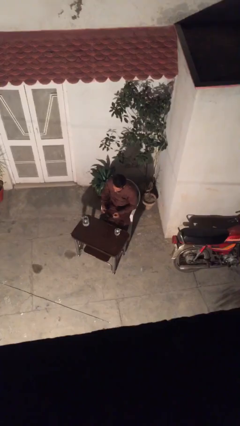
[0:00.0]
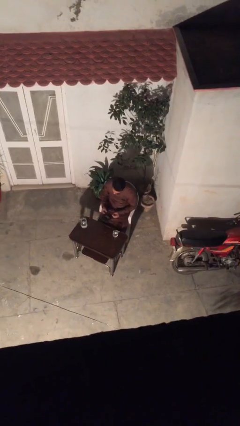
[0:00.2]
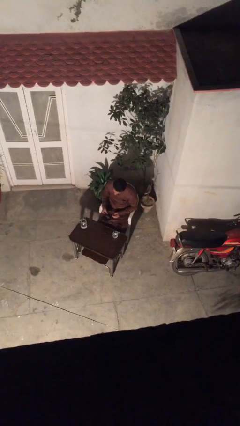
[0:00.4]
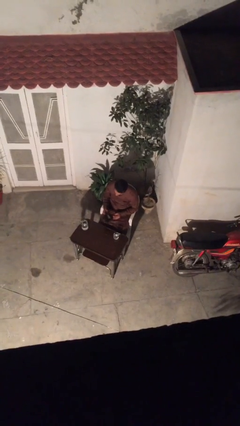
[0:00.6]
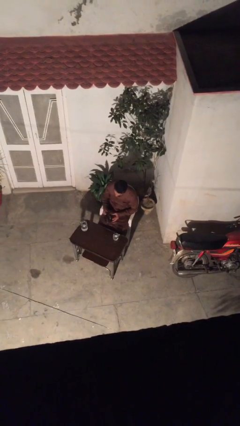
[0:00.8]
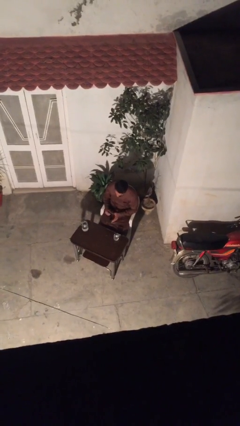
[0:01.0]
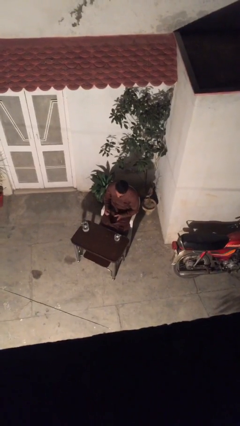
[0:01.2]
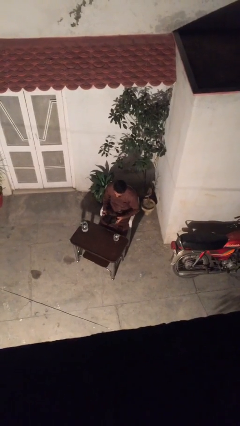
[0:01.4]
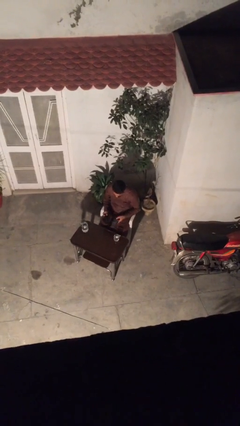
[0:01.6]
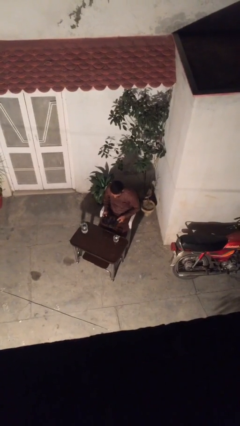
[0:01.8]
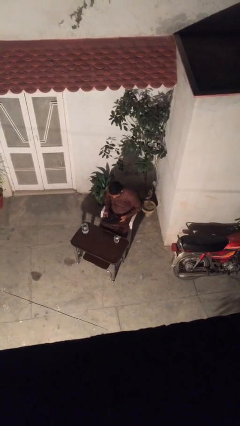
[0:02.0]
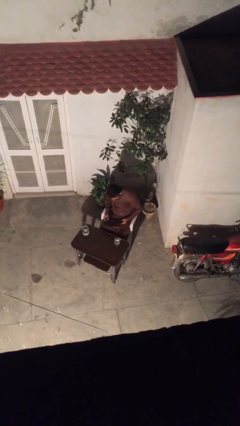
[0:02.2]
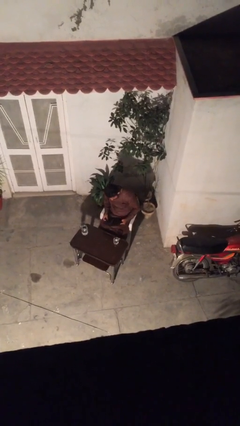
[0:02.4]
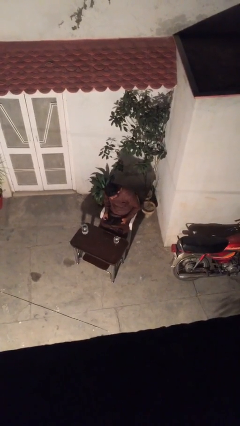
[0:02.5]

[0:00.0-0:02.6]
person picks up object from table

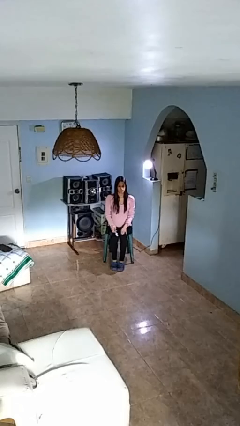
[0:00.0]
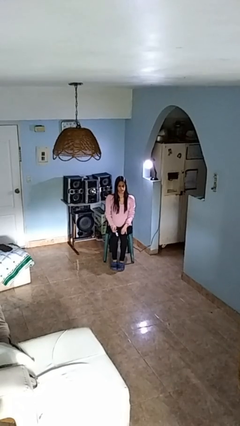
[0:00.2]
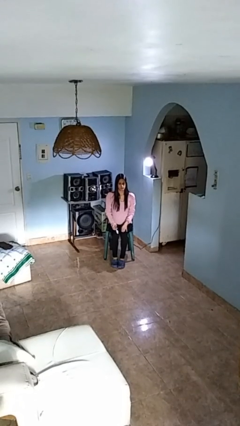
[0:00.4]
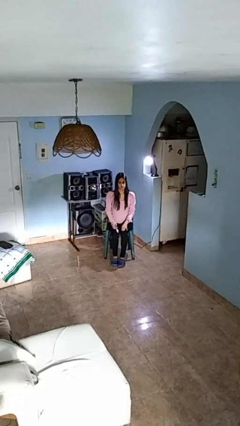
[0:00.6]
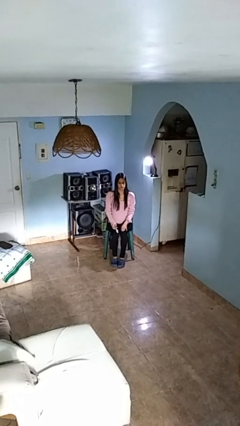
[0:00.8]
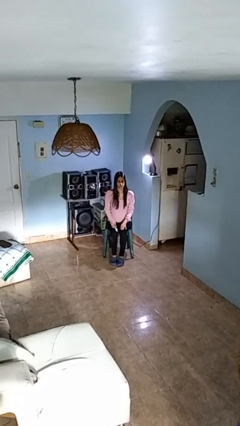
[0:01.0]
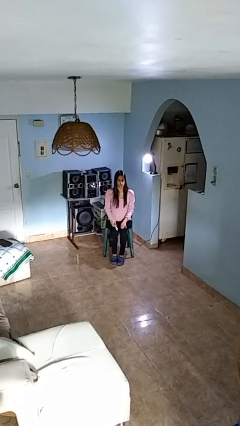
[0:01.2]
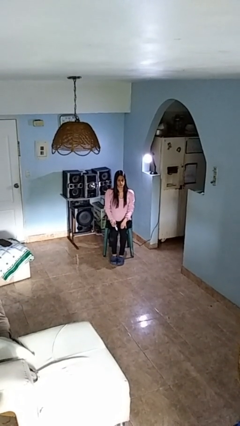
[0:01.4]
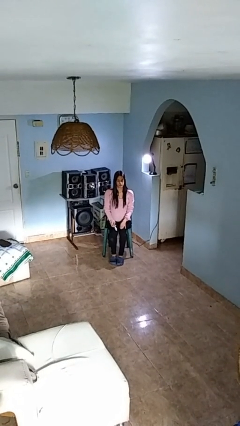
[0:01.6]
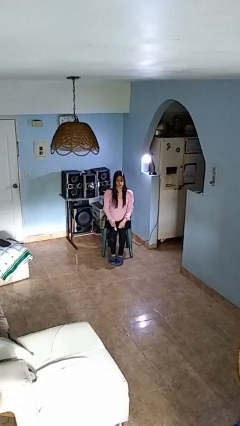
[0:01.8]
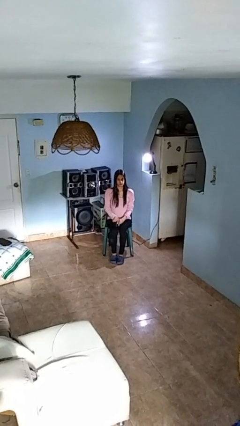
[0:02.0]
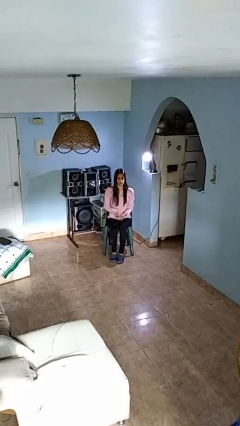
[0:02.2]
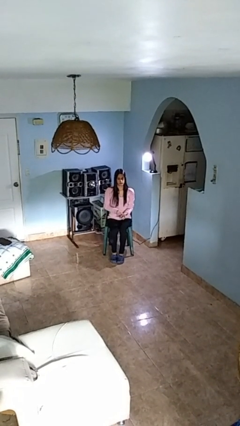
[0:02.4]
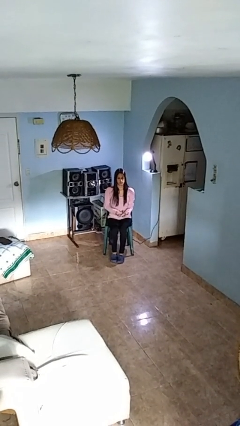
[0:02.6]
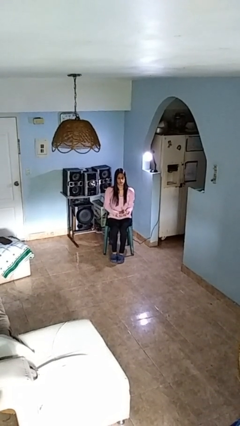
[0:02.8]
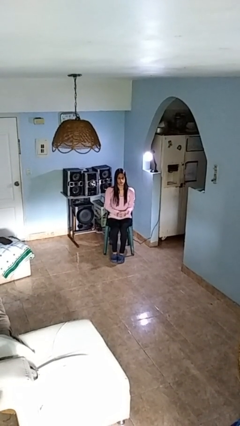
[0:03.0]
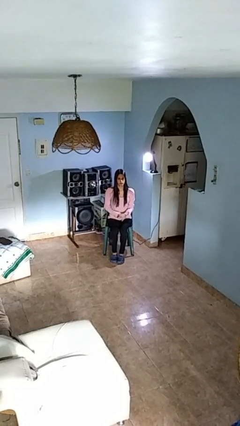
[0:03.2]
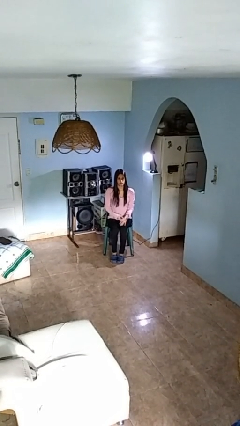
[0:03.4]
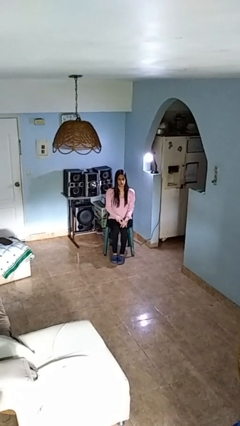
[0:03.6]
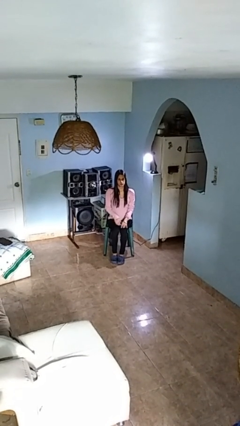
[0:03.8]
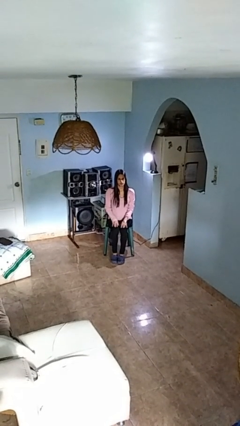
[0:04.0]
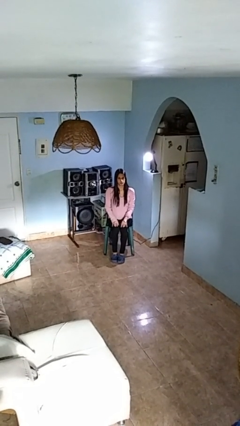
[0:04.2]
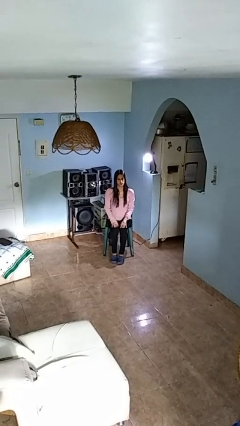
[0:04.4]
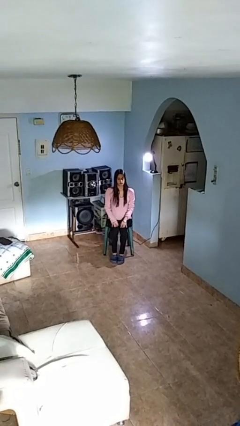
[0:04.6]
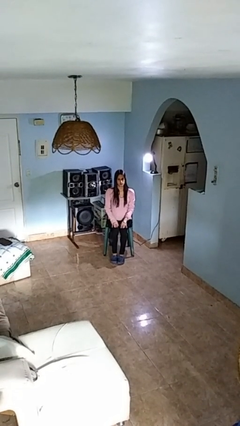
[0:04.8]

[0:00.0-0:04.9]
person puts on wristwatch

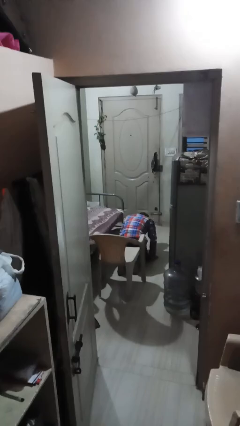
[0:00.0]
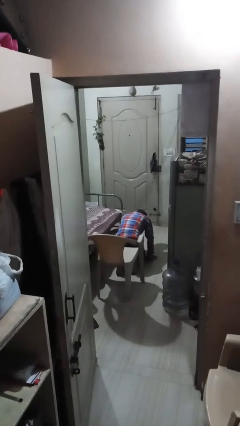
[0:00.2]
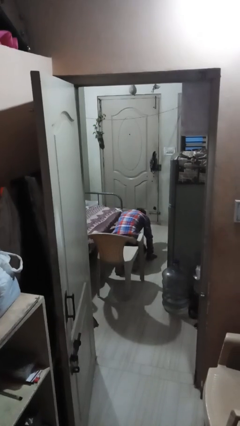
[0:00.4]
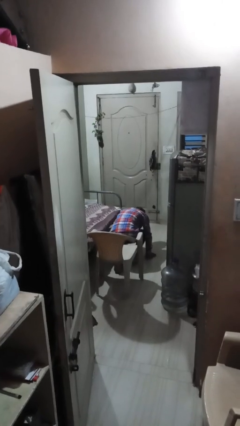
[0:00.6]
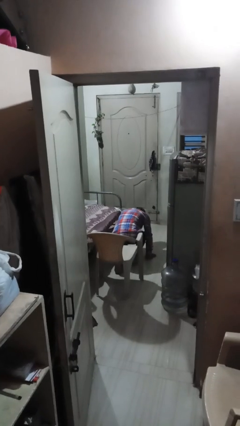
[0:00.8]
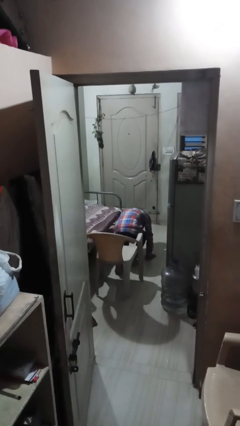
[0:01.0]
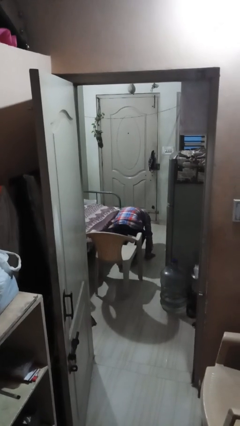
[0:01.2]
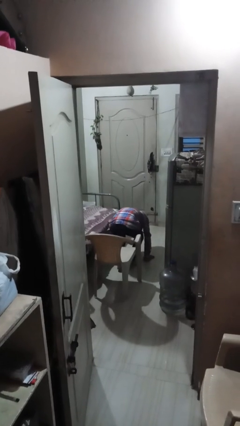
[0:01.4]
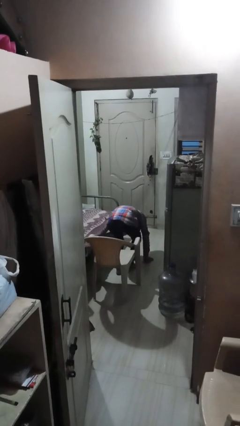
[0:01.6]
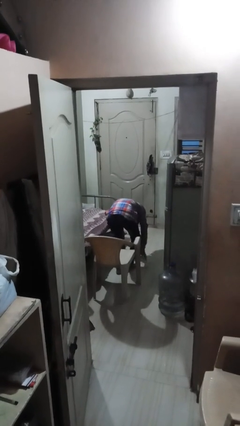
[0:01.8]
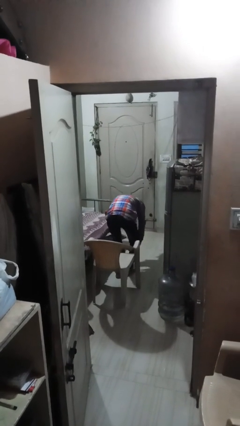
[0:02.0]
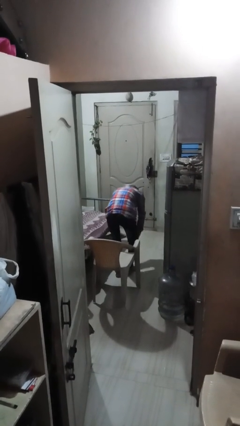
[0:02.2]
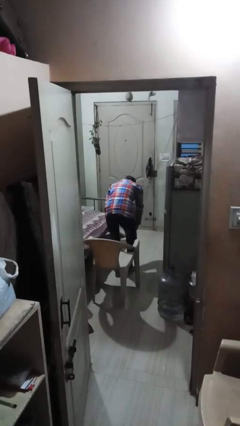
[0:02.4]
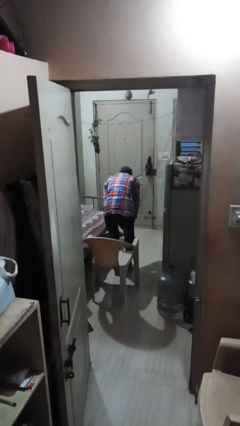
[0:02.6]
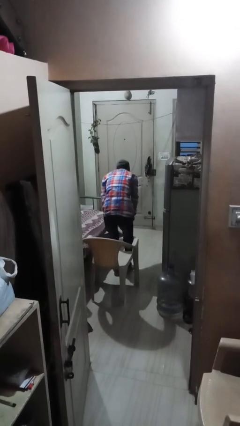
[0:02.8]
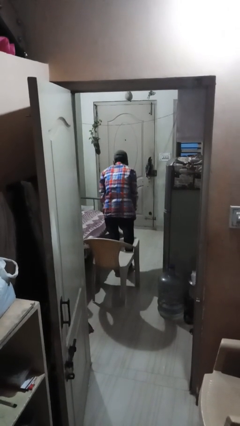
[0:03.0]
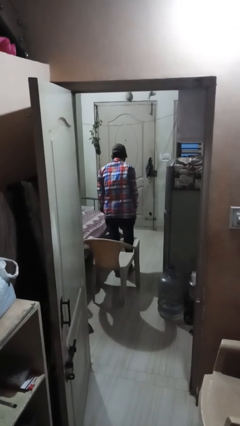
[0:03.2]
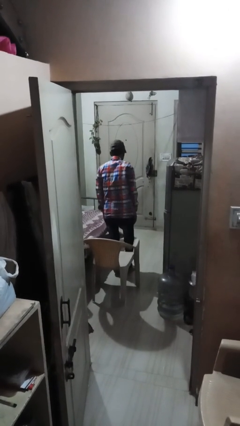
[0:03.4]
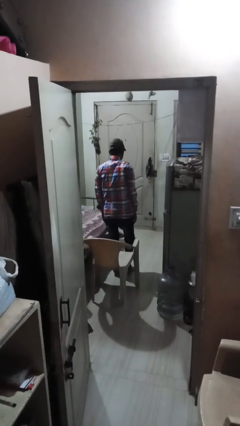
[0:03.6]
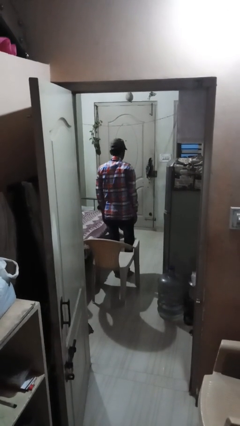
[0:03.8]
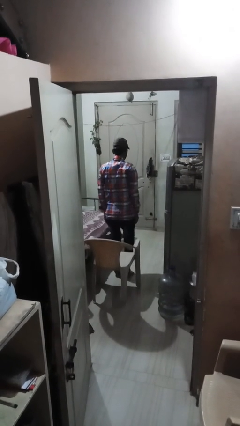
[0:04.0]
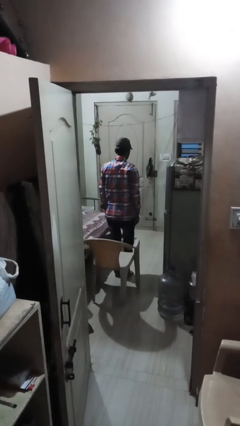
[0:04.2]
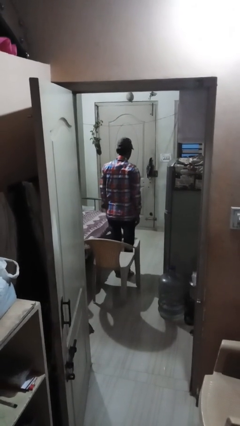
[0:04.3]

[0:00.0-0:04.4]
person stands up from floor

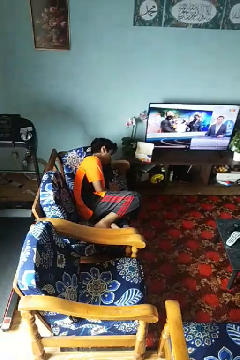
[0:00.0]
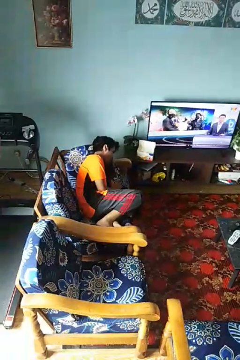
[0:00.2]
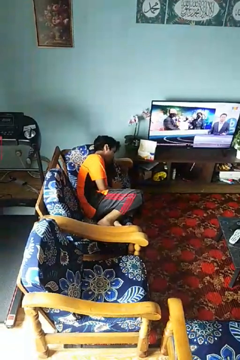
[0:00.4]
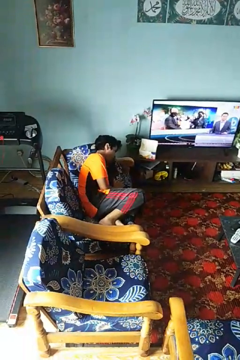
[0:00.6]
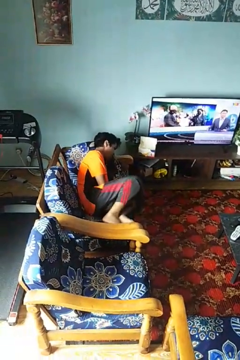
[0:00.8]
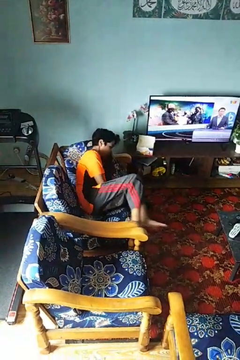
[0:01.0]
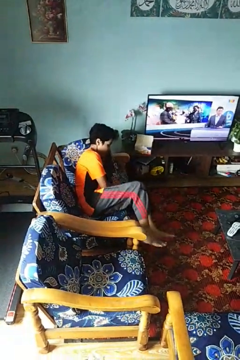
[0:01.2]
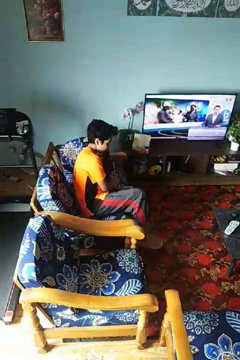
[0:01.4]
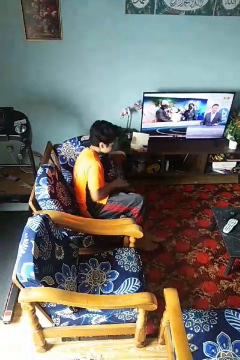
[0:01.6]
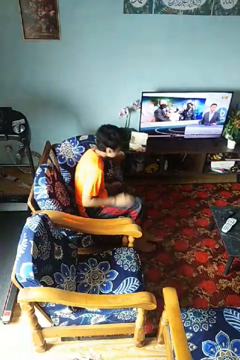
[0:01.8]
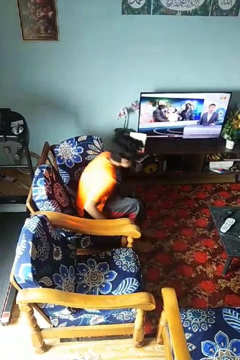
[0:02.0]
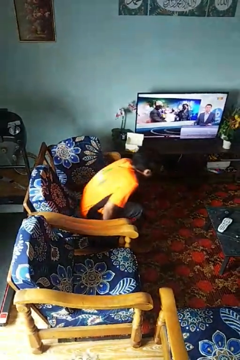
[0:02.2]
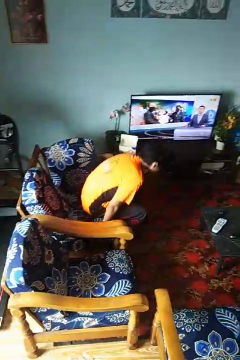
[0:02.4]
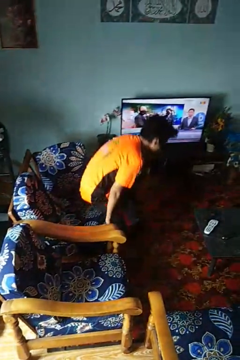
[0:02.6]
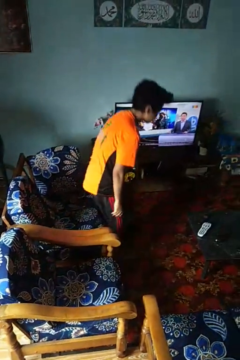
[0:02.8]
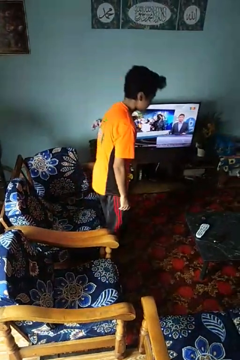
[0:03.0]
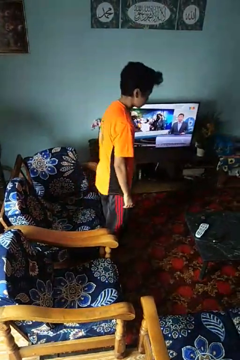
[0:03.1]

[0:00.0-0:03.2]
person stands up

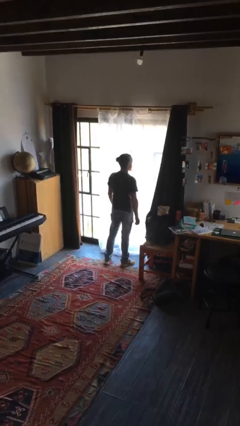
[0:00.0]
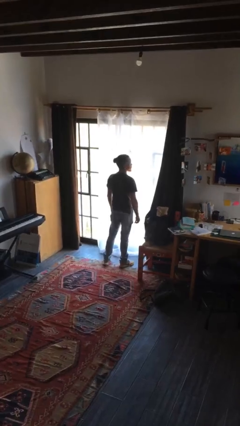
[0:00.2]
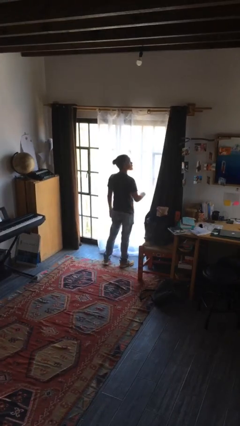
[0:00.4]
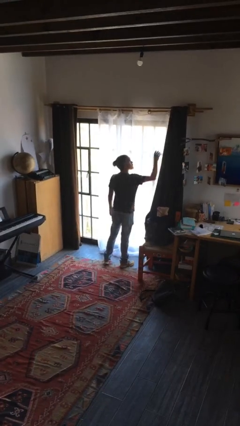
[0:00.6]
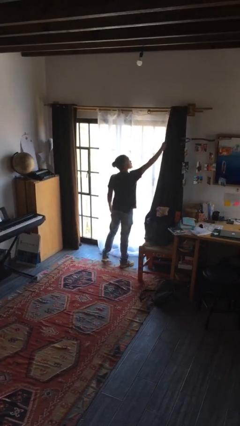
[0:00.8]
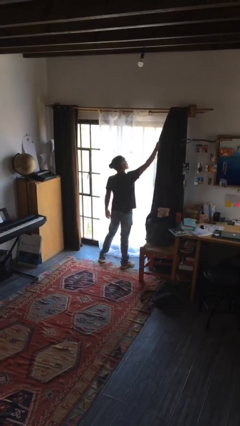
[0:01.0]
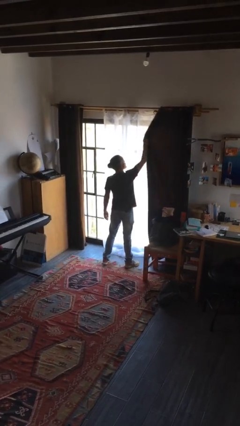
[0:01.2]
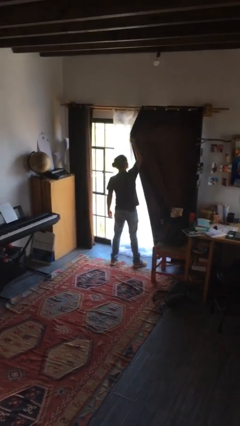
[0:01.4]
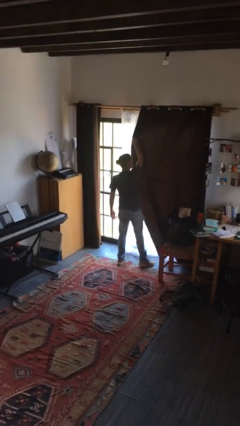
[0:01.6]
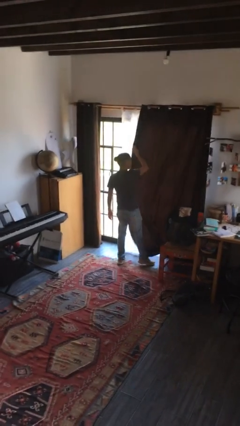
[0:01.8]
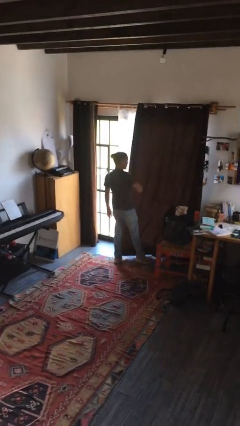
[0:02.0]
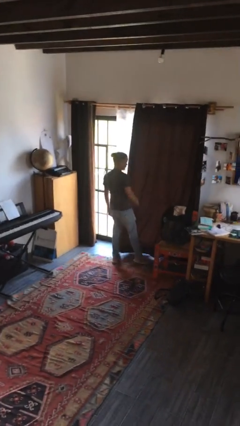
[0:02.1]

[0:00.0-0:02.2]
person closes curtains

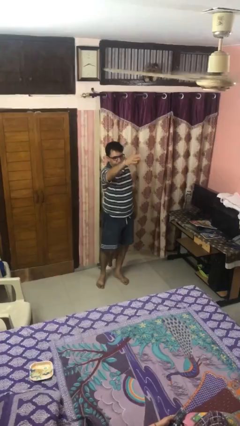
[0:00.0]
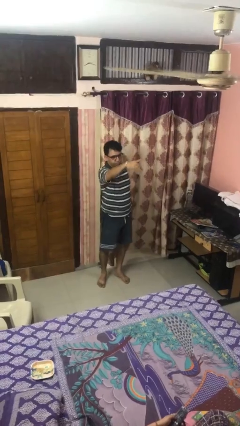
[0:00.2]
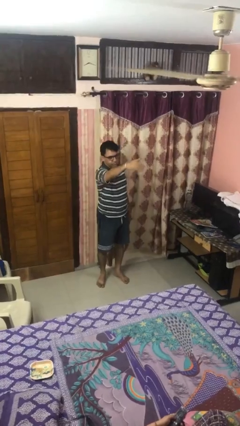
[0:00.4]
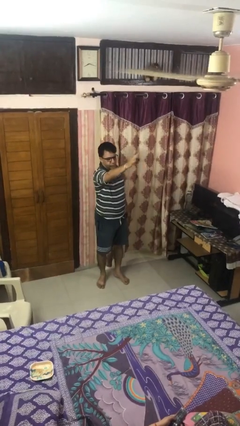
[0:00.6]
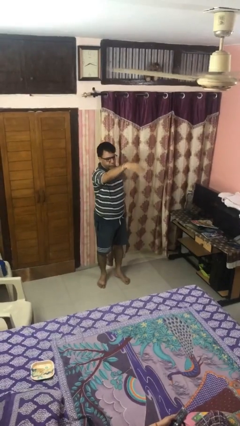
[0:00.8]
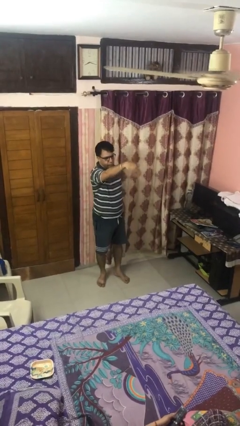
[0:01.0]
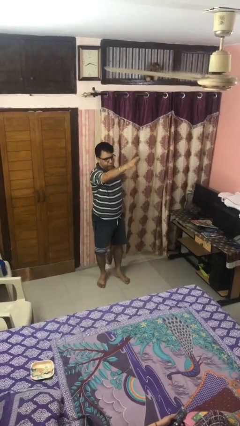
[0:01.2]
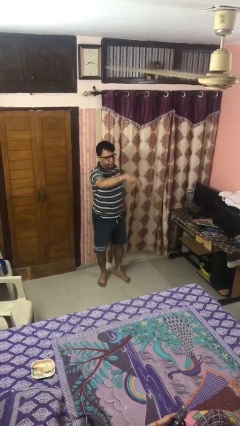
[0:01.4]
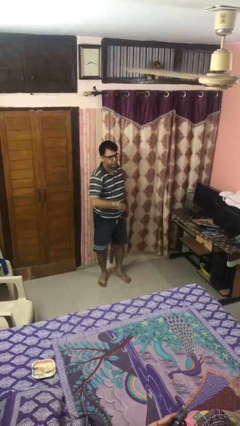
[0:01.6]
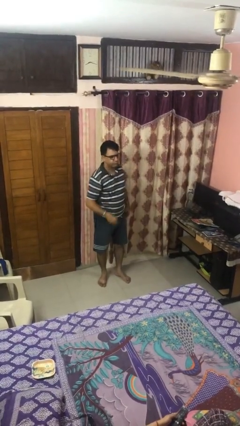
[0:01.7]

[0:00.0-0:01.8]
person gestures come here
